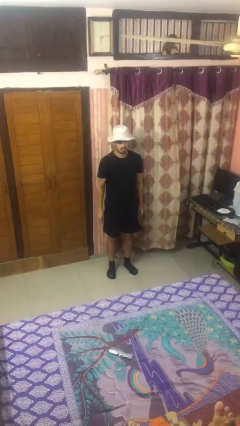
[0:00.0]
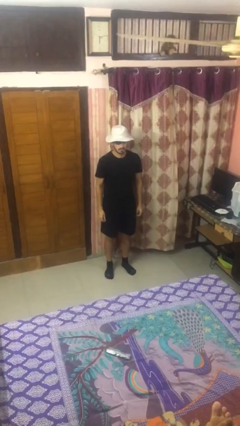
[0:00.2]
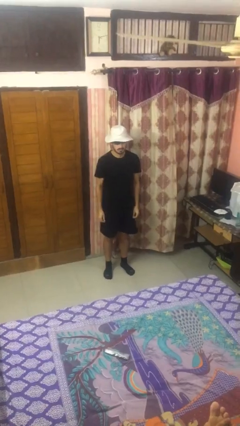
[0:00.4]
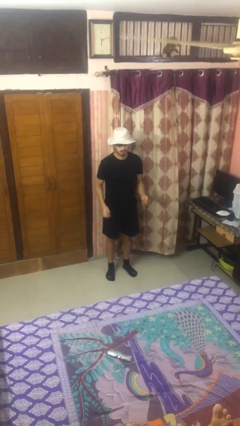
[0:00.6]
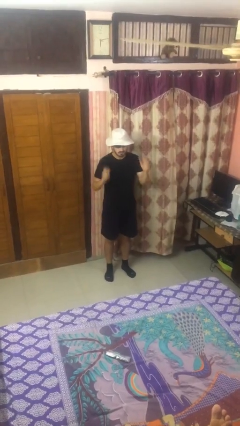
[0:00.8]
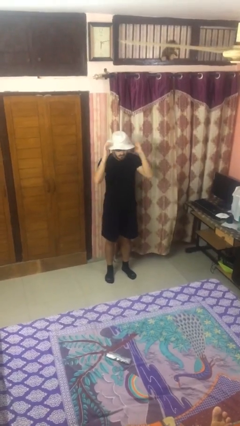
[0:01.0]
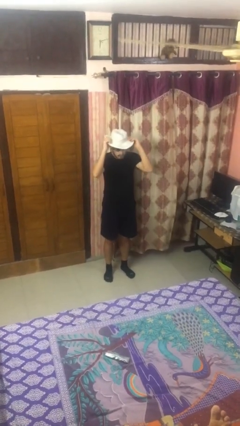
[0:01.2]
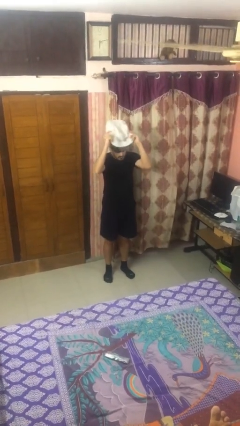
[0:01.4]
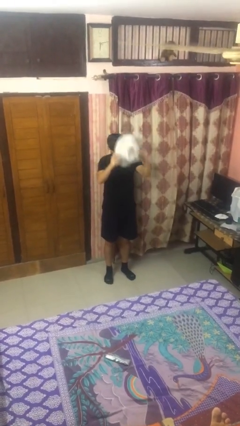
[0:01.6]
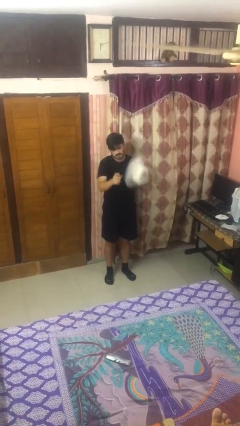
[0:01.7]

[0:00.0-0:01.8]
person takes off hat

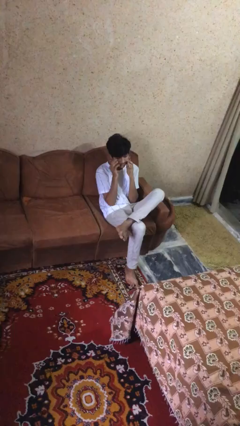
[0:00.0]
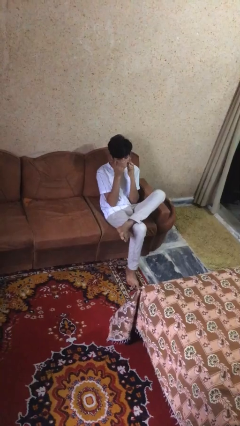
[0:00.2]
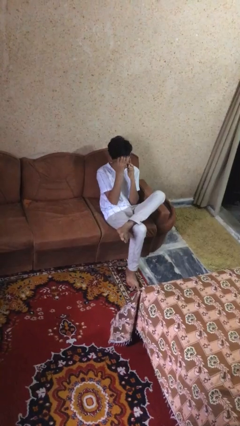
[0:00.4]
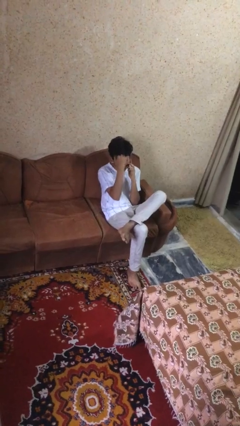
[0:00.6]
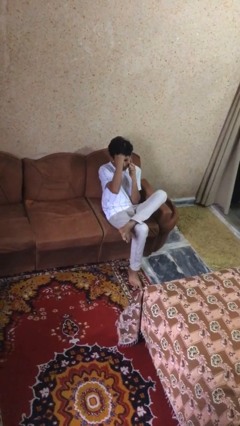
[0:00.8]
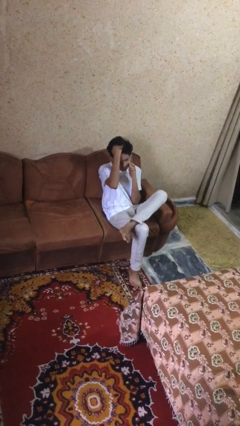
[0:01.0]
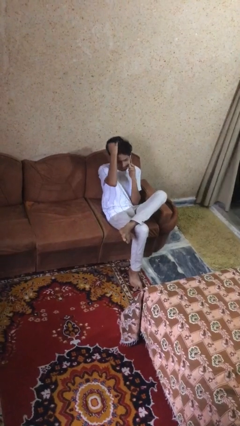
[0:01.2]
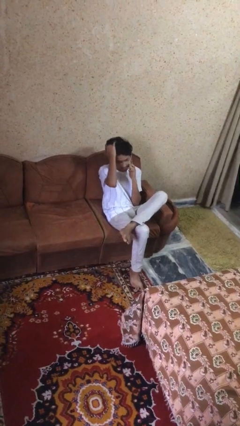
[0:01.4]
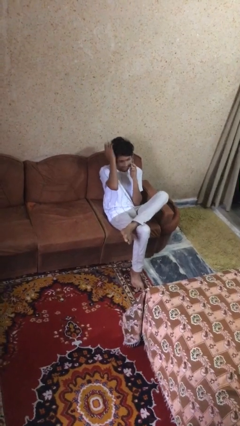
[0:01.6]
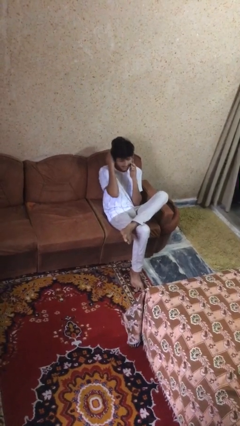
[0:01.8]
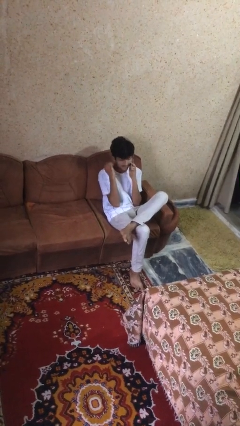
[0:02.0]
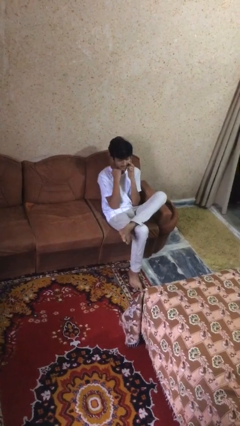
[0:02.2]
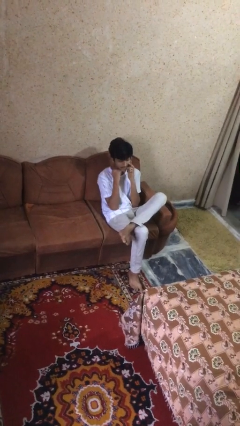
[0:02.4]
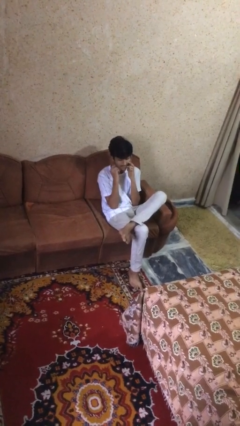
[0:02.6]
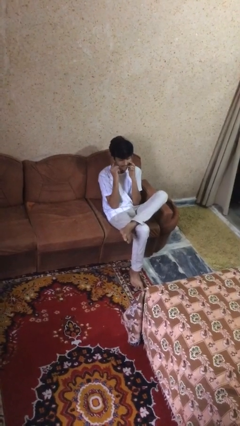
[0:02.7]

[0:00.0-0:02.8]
person talks on phone

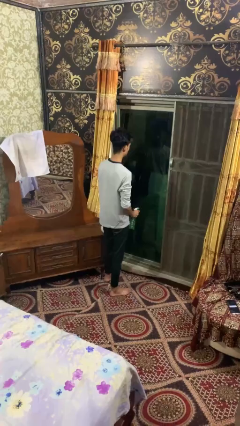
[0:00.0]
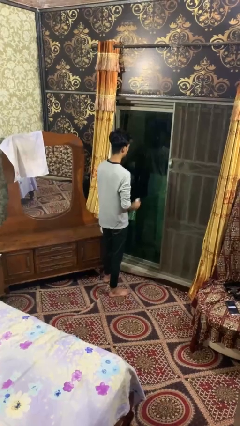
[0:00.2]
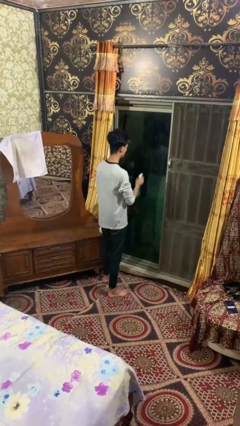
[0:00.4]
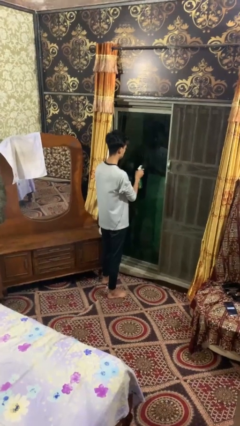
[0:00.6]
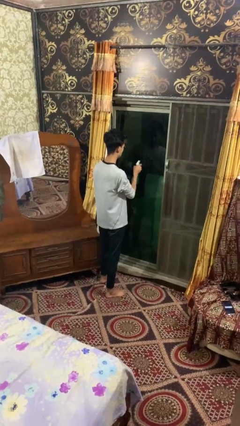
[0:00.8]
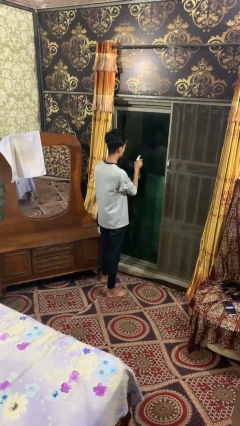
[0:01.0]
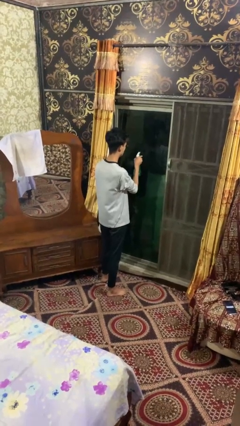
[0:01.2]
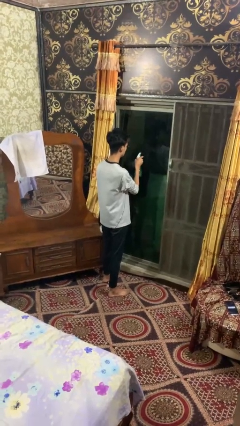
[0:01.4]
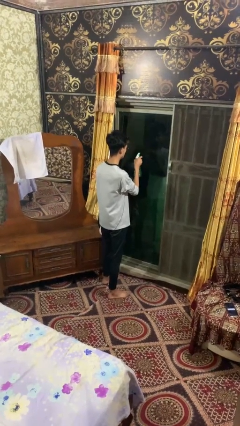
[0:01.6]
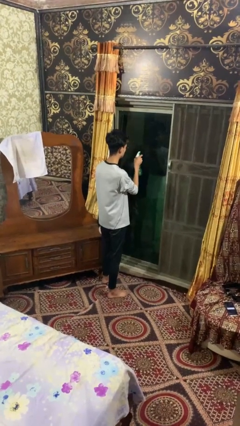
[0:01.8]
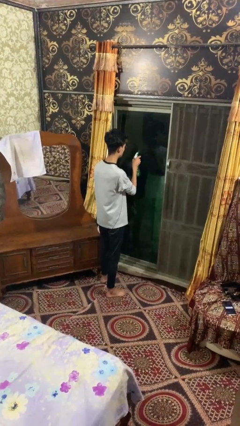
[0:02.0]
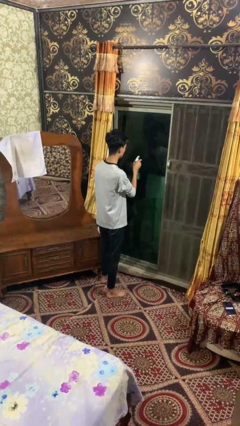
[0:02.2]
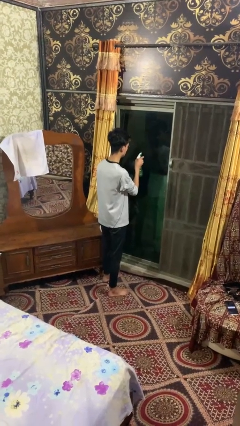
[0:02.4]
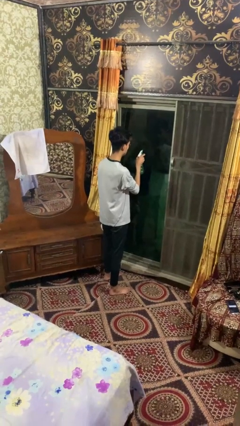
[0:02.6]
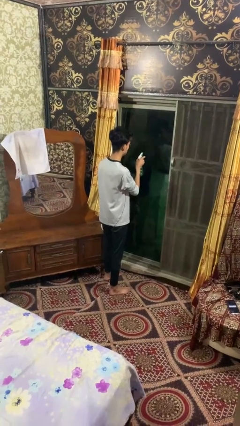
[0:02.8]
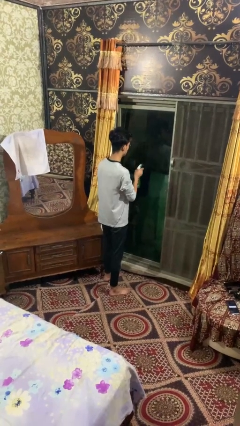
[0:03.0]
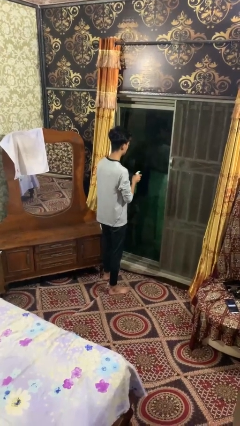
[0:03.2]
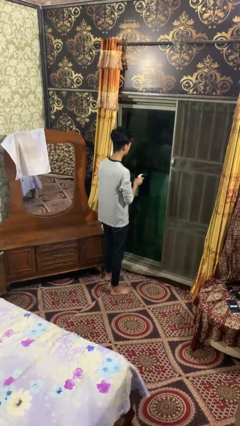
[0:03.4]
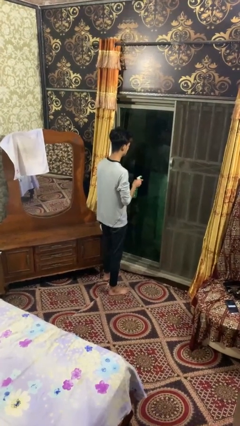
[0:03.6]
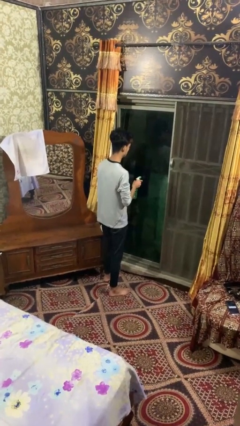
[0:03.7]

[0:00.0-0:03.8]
person sprays from bottle

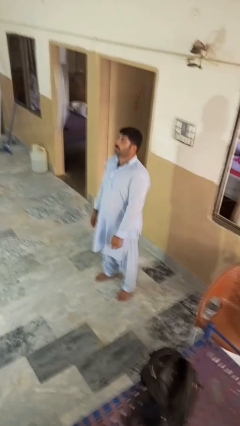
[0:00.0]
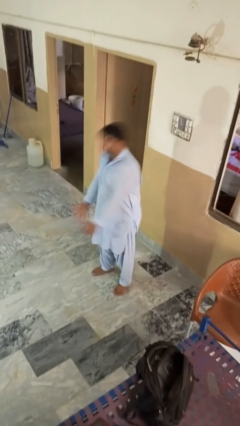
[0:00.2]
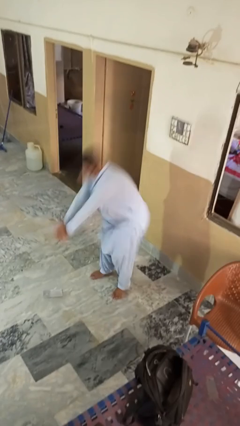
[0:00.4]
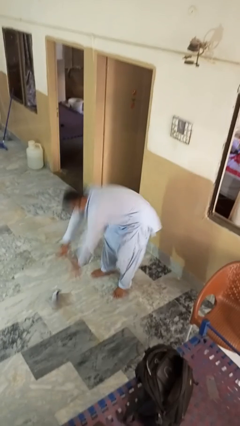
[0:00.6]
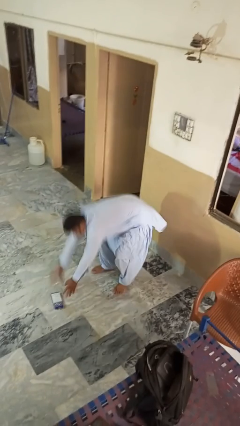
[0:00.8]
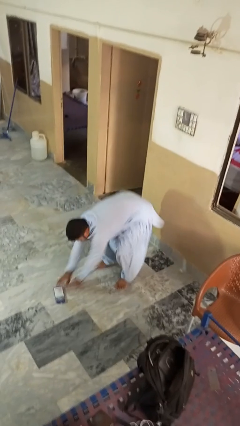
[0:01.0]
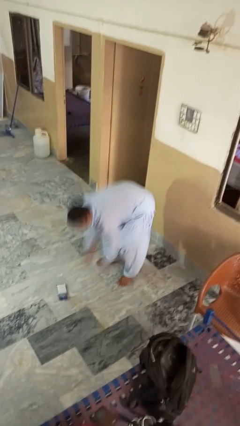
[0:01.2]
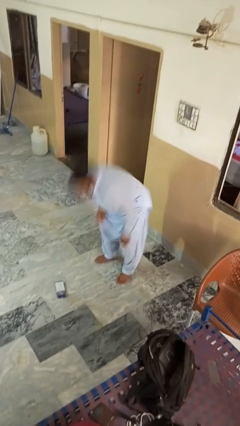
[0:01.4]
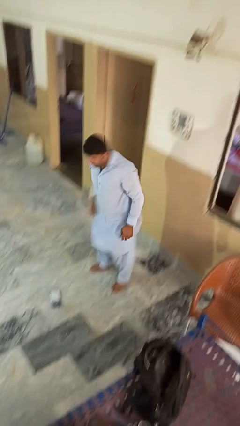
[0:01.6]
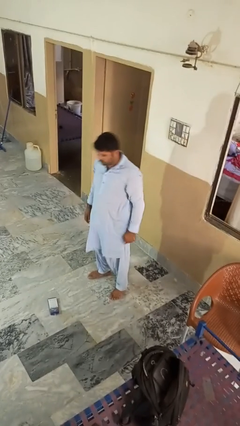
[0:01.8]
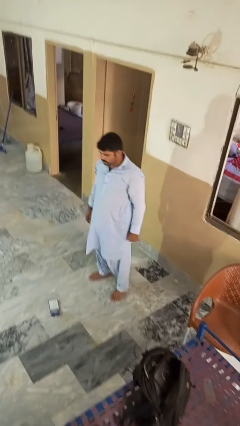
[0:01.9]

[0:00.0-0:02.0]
person catches dropped object

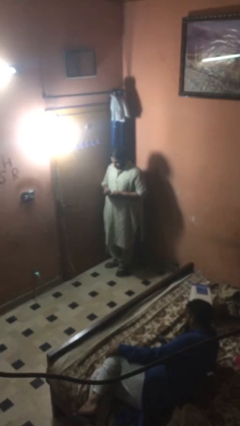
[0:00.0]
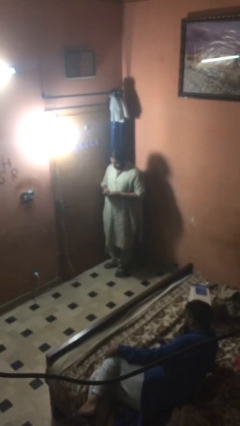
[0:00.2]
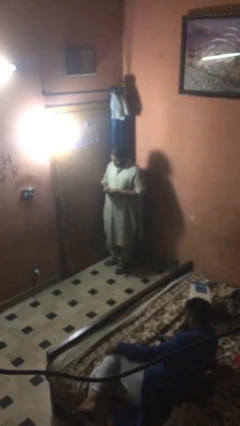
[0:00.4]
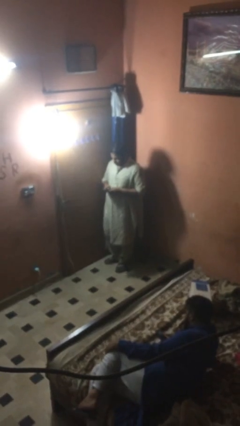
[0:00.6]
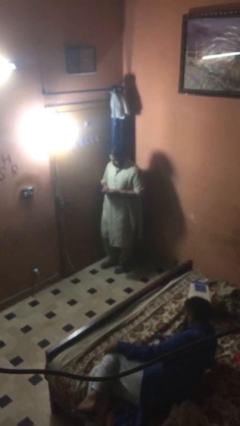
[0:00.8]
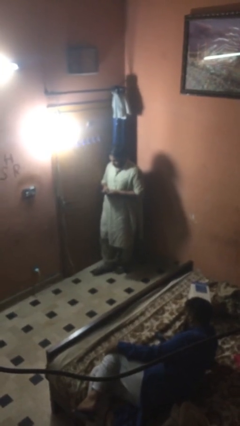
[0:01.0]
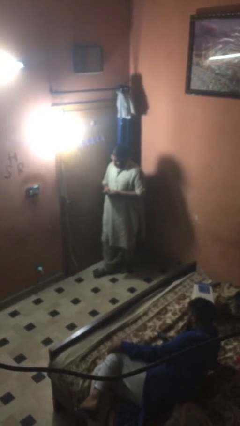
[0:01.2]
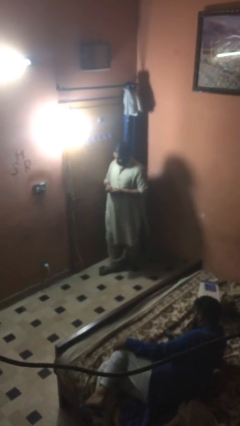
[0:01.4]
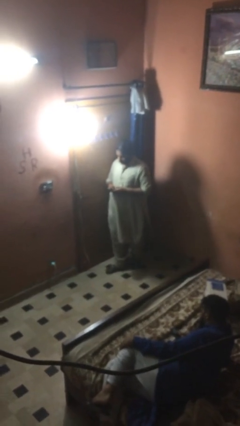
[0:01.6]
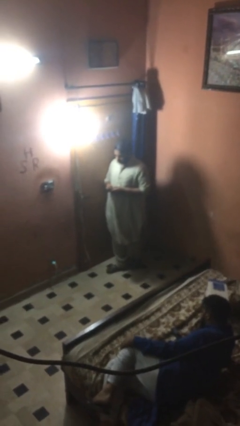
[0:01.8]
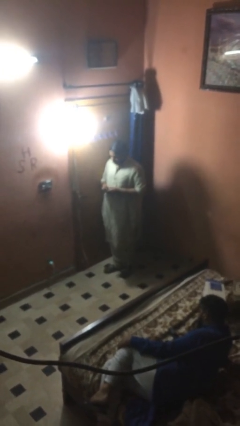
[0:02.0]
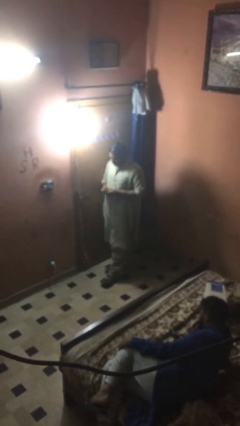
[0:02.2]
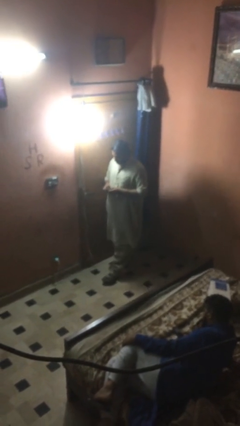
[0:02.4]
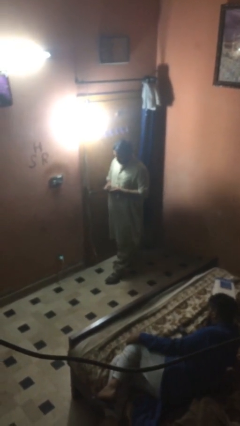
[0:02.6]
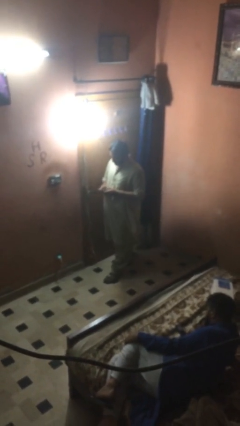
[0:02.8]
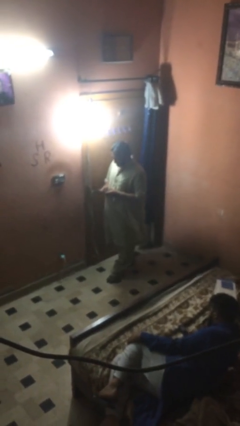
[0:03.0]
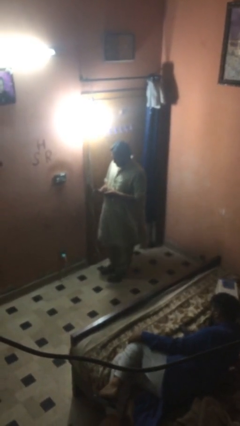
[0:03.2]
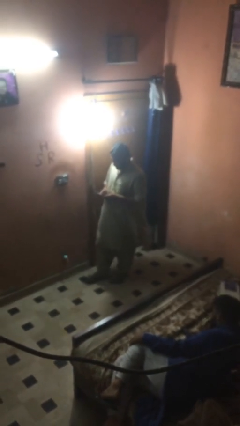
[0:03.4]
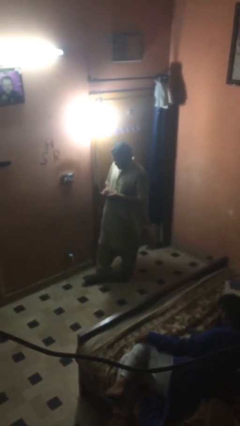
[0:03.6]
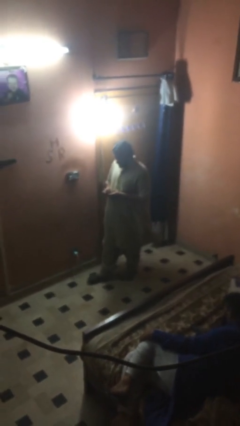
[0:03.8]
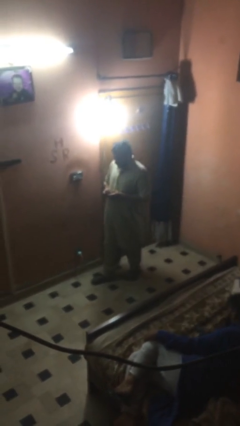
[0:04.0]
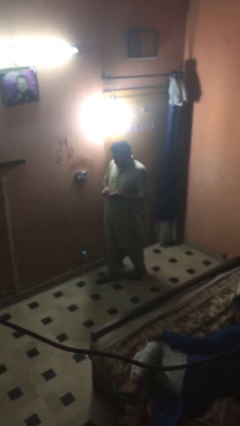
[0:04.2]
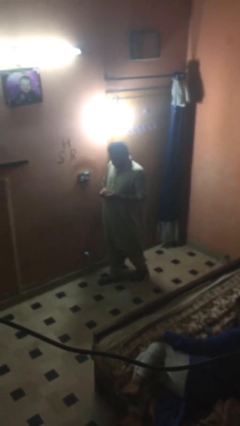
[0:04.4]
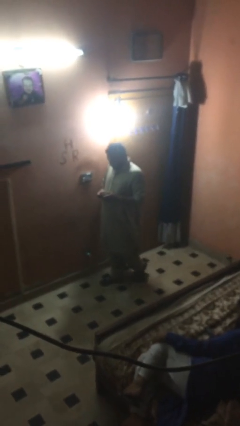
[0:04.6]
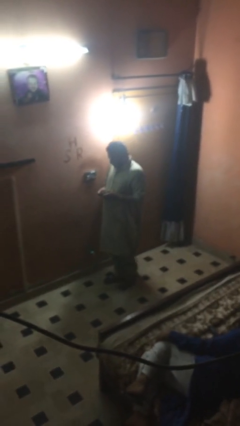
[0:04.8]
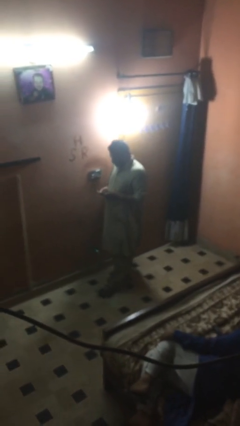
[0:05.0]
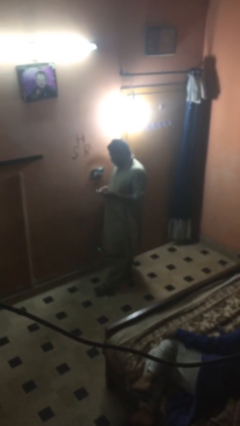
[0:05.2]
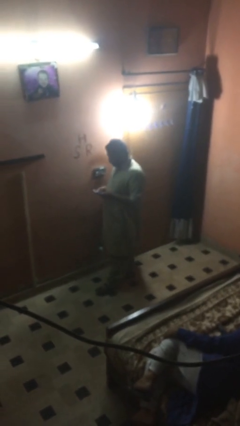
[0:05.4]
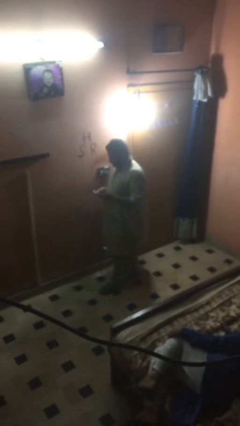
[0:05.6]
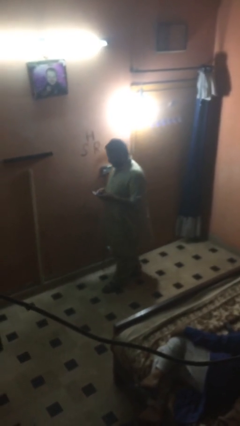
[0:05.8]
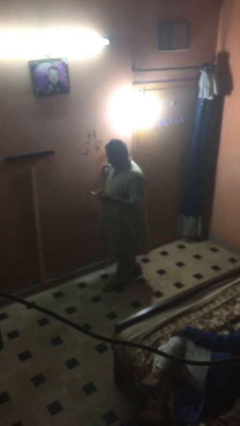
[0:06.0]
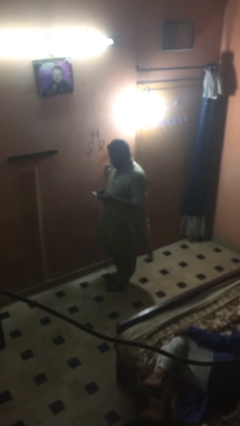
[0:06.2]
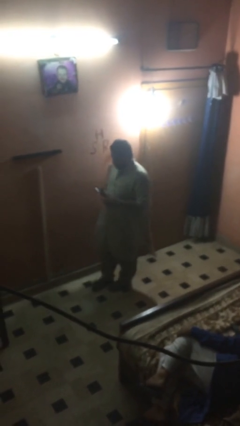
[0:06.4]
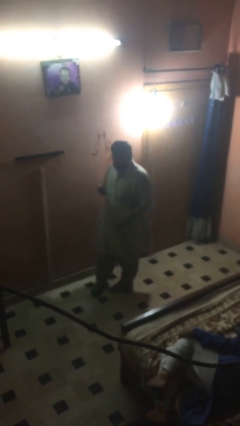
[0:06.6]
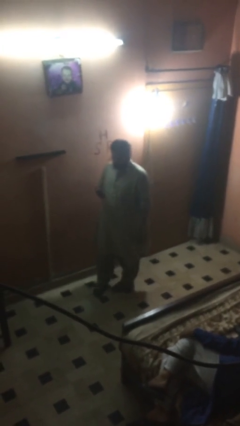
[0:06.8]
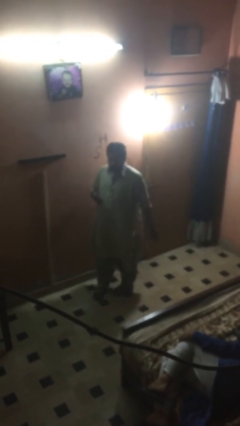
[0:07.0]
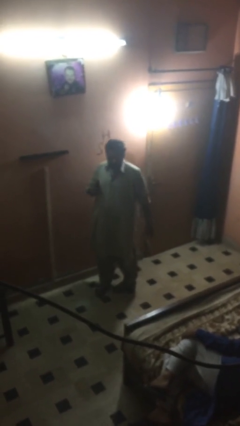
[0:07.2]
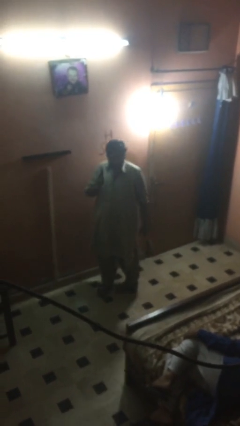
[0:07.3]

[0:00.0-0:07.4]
person texts on phone
